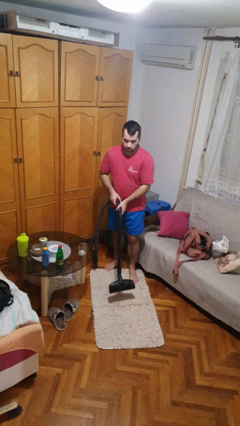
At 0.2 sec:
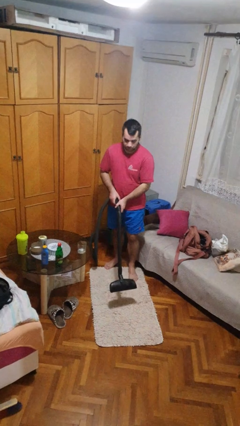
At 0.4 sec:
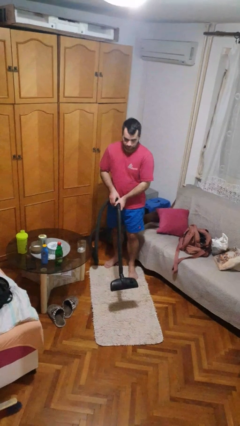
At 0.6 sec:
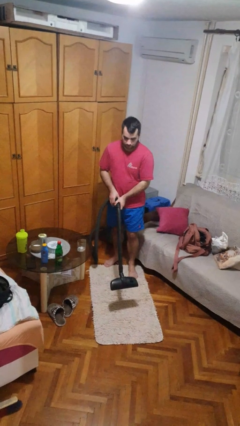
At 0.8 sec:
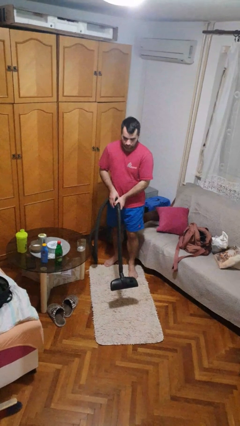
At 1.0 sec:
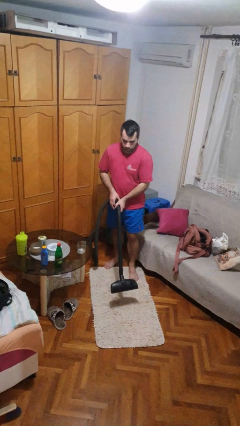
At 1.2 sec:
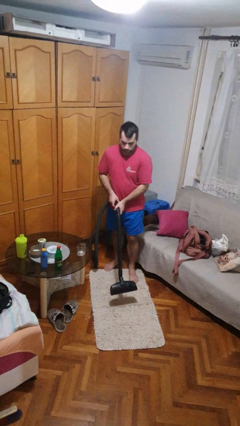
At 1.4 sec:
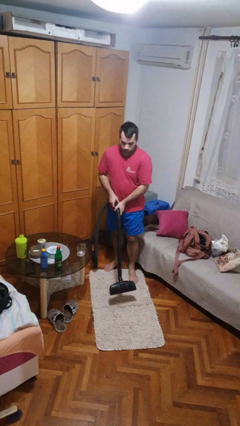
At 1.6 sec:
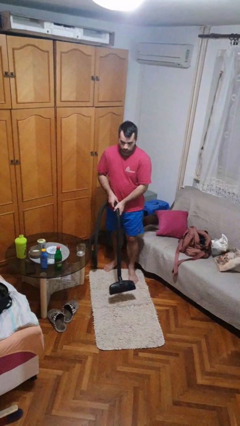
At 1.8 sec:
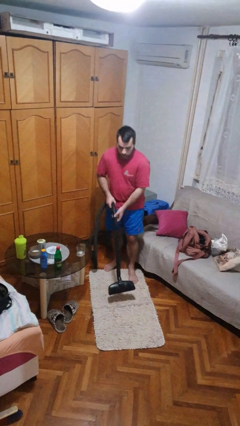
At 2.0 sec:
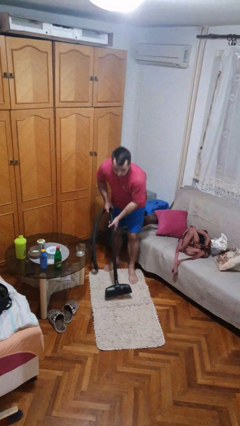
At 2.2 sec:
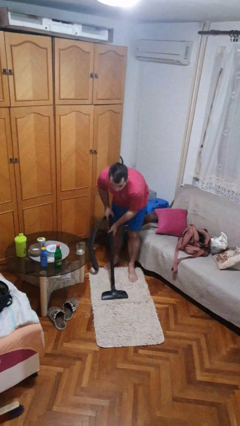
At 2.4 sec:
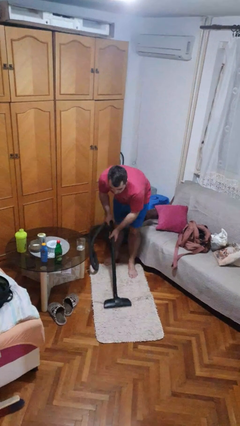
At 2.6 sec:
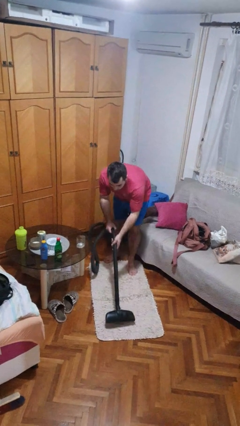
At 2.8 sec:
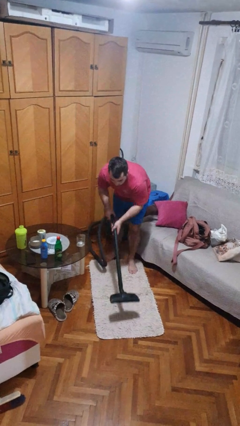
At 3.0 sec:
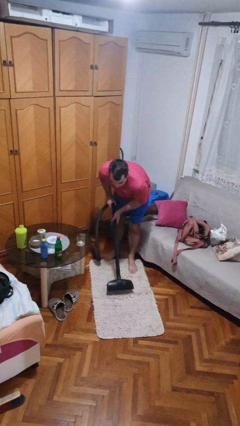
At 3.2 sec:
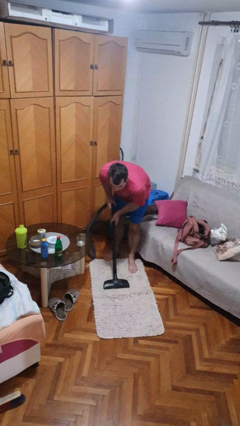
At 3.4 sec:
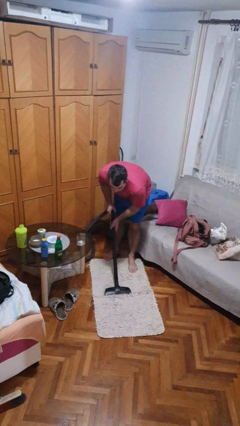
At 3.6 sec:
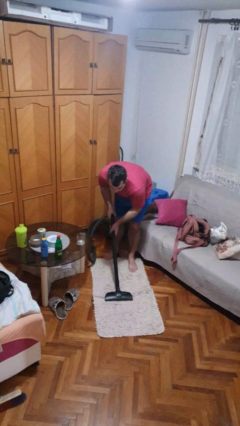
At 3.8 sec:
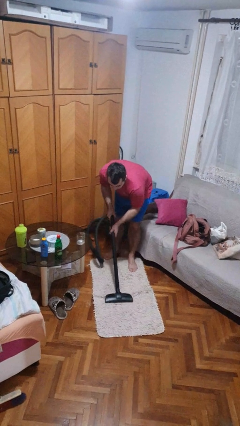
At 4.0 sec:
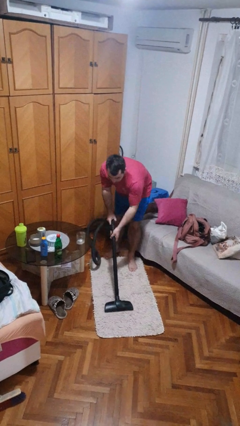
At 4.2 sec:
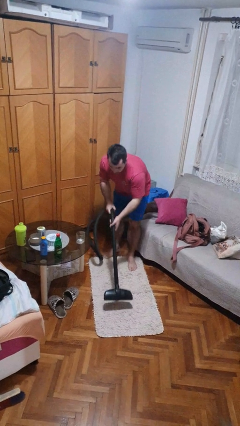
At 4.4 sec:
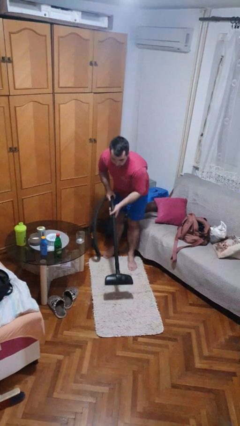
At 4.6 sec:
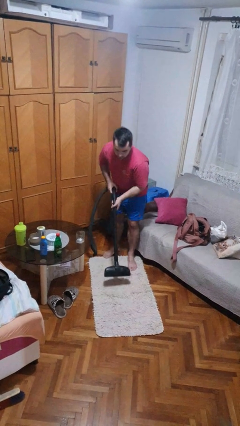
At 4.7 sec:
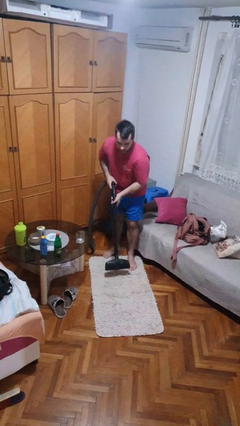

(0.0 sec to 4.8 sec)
person vacuums carpet

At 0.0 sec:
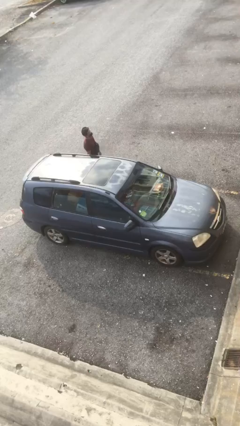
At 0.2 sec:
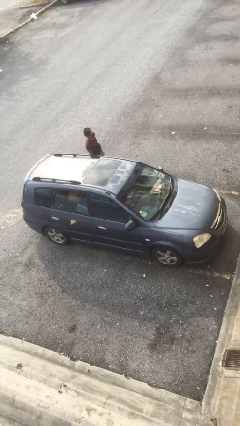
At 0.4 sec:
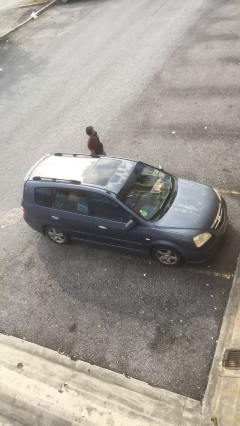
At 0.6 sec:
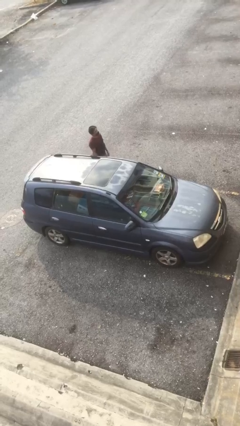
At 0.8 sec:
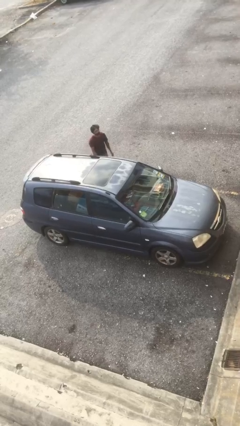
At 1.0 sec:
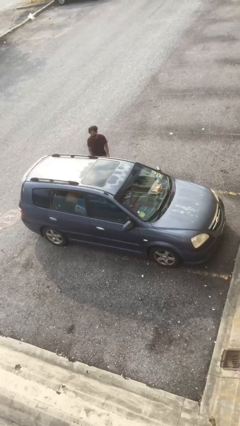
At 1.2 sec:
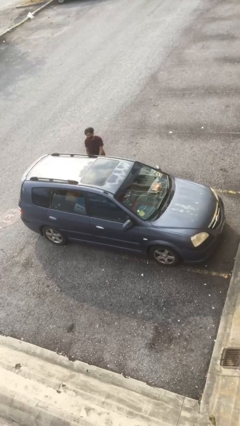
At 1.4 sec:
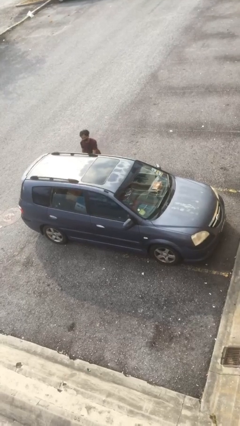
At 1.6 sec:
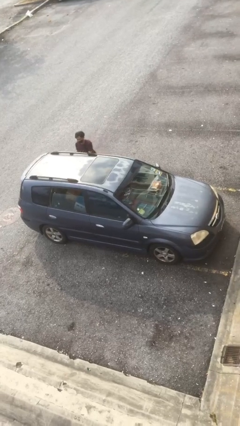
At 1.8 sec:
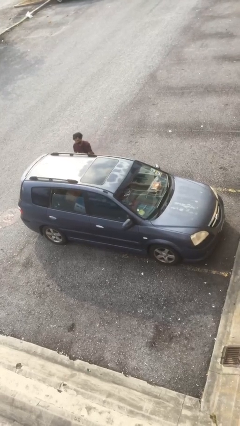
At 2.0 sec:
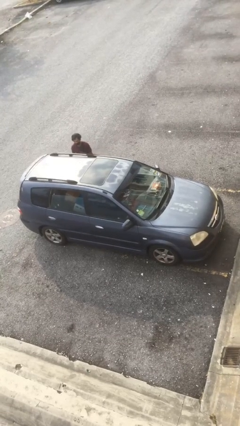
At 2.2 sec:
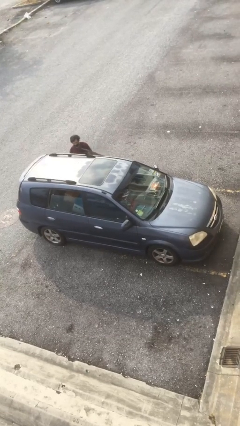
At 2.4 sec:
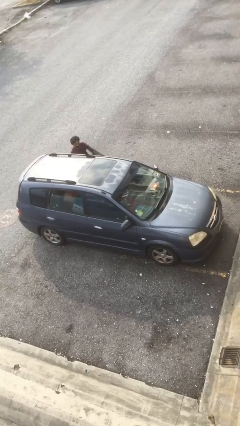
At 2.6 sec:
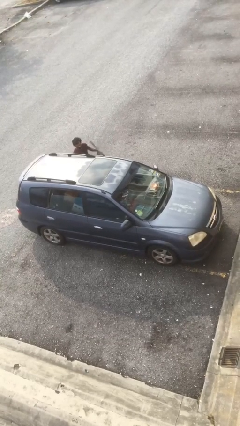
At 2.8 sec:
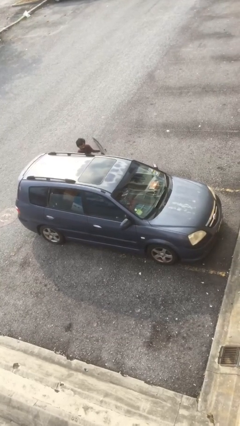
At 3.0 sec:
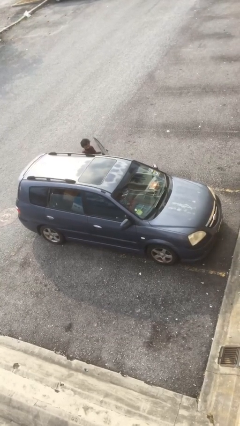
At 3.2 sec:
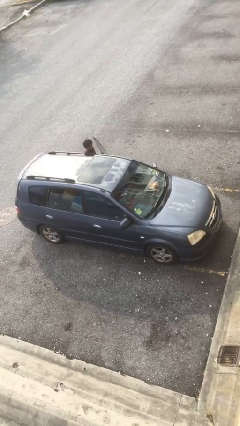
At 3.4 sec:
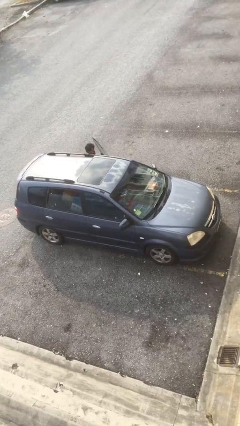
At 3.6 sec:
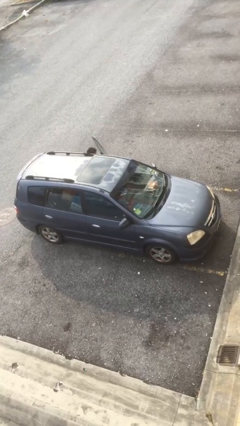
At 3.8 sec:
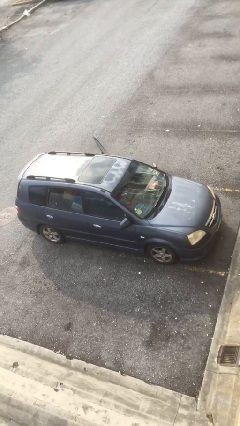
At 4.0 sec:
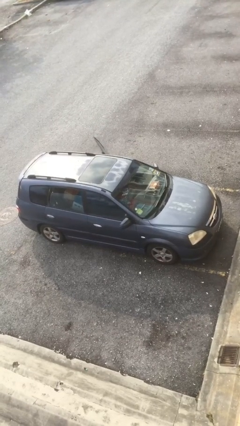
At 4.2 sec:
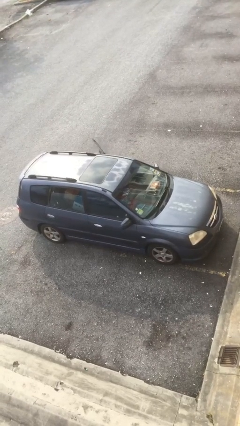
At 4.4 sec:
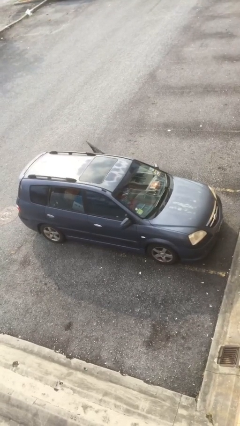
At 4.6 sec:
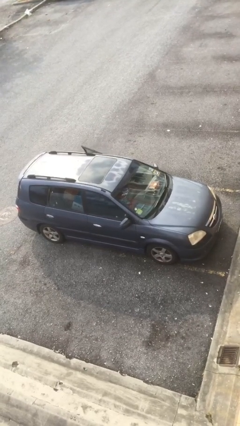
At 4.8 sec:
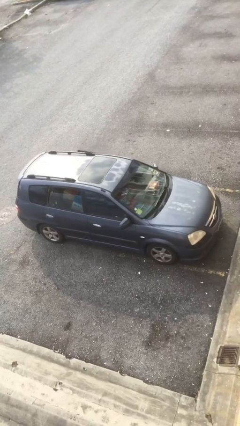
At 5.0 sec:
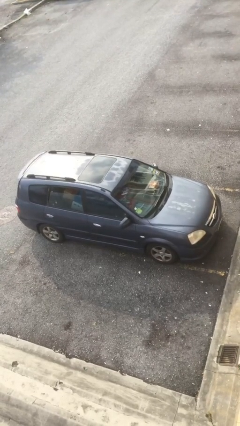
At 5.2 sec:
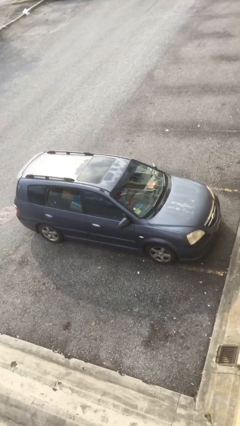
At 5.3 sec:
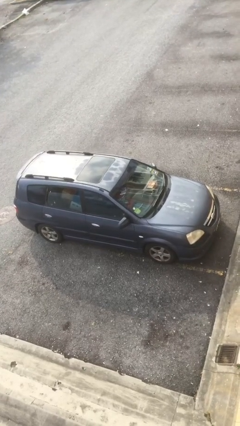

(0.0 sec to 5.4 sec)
car picks up person

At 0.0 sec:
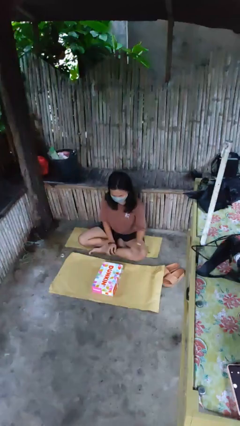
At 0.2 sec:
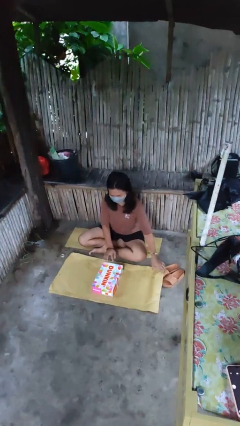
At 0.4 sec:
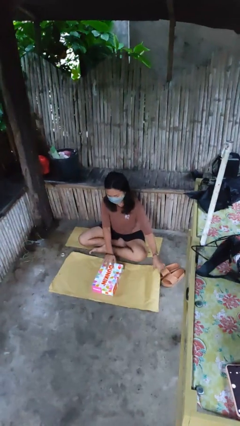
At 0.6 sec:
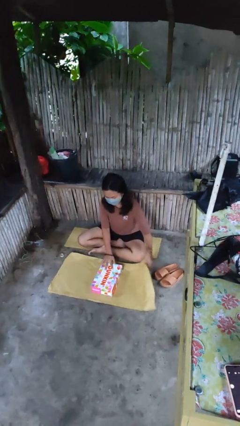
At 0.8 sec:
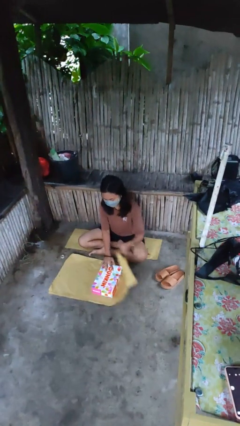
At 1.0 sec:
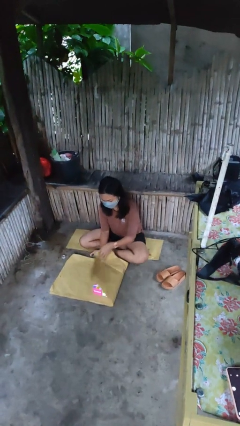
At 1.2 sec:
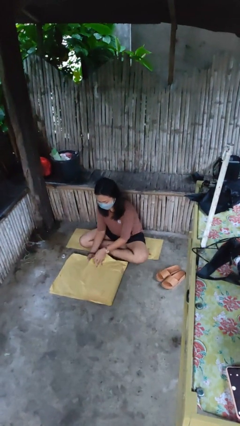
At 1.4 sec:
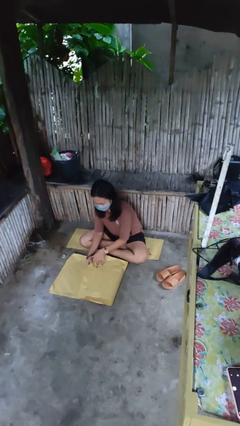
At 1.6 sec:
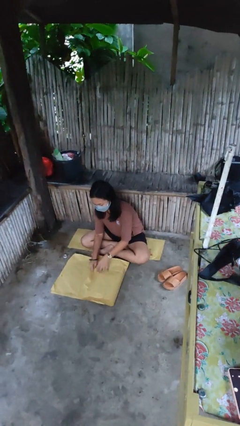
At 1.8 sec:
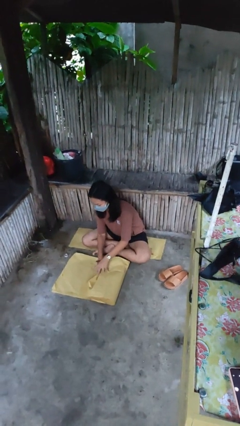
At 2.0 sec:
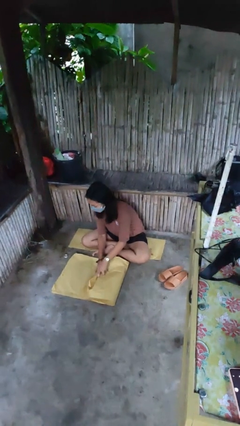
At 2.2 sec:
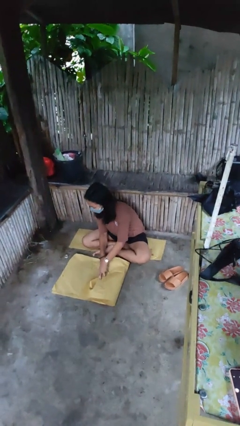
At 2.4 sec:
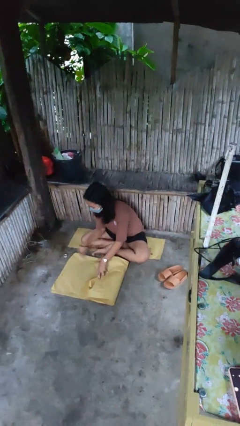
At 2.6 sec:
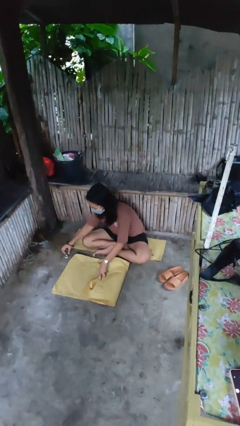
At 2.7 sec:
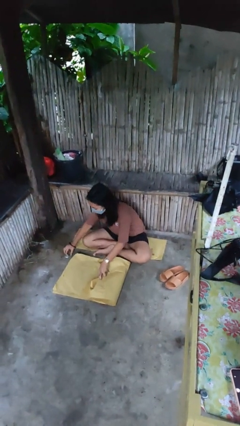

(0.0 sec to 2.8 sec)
person wraps box

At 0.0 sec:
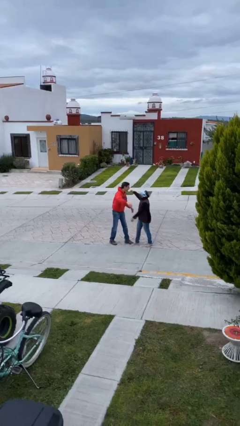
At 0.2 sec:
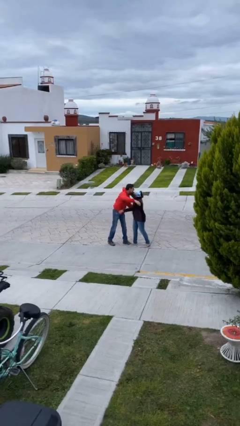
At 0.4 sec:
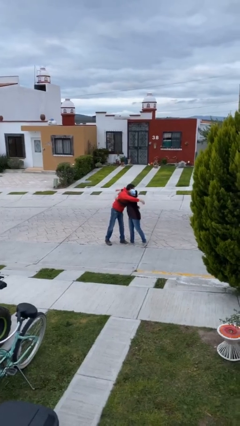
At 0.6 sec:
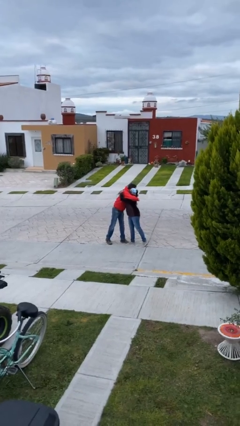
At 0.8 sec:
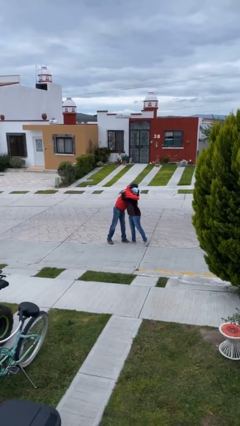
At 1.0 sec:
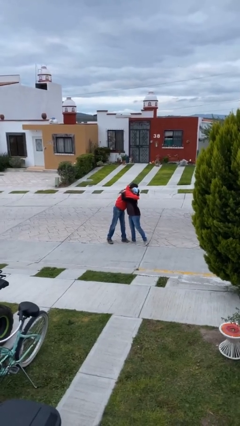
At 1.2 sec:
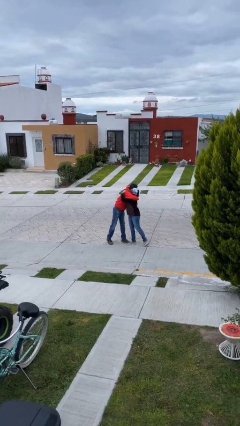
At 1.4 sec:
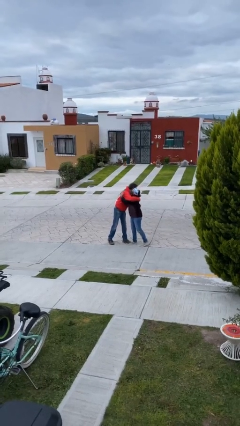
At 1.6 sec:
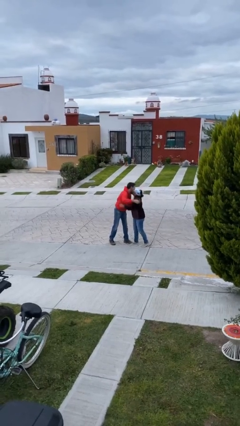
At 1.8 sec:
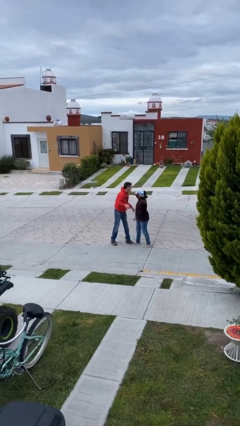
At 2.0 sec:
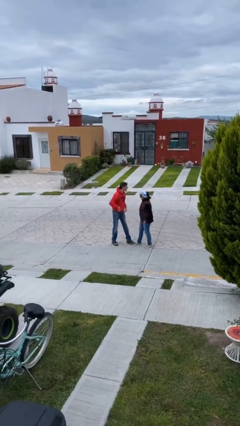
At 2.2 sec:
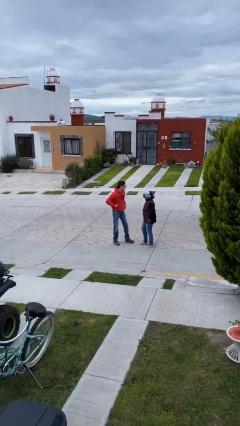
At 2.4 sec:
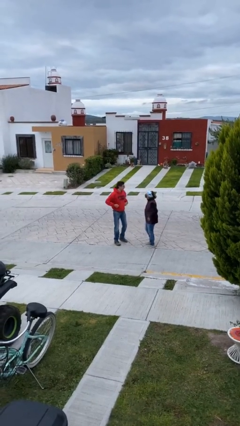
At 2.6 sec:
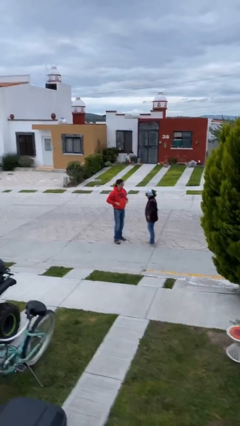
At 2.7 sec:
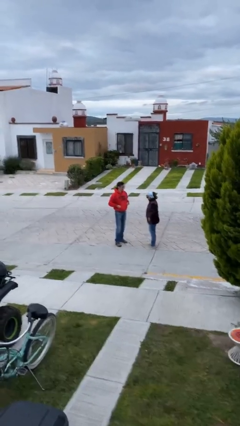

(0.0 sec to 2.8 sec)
person embraces person

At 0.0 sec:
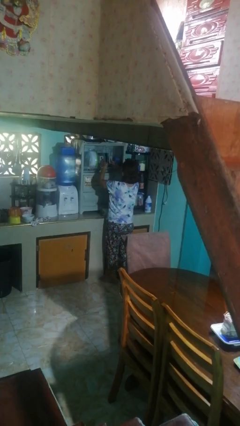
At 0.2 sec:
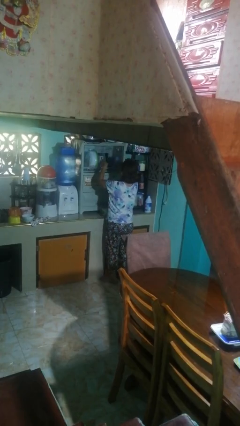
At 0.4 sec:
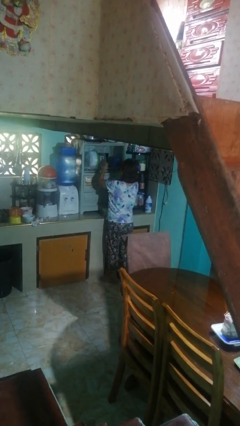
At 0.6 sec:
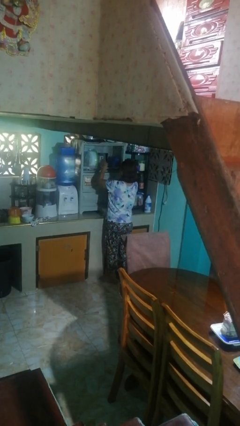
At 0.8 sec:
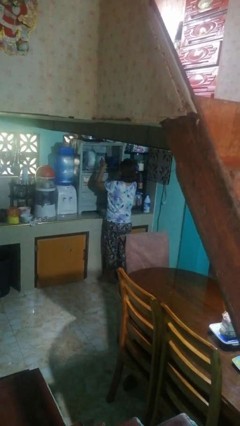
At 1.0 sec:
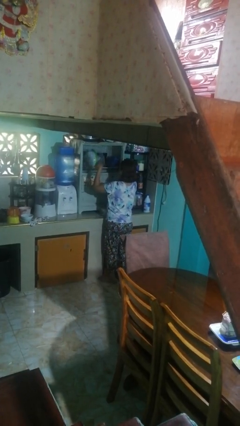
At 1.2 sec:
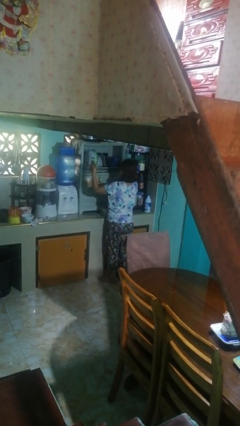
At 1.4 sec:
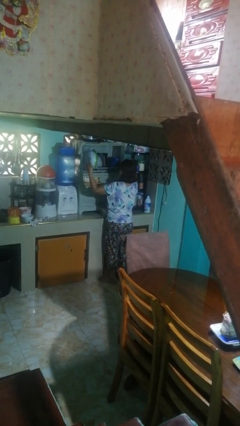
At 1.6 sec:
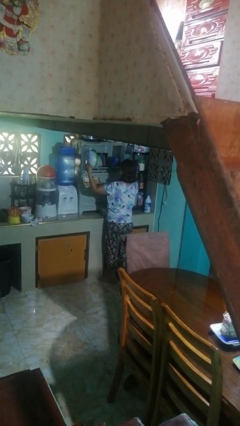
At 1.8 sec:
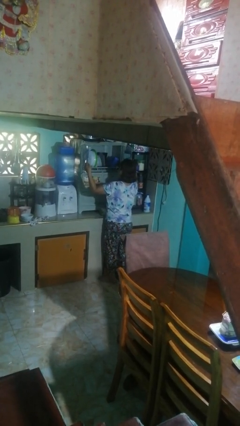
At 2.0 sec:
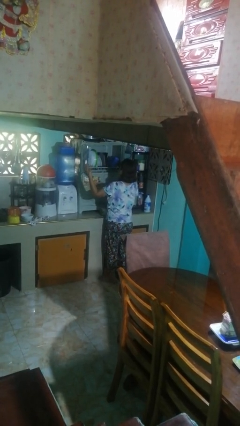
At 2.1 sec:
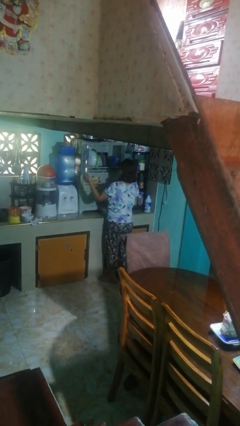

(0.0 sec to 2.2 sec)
person closes curtains
